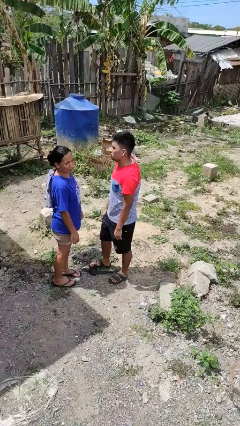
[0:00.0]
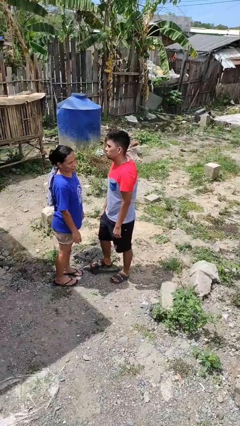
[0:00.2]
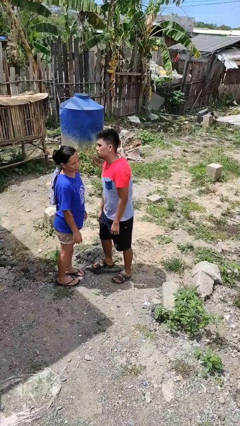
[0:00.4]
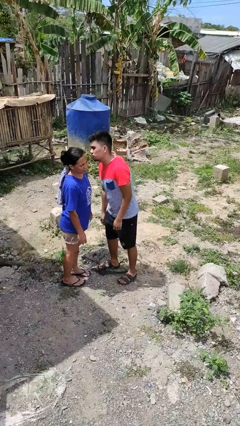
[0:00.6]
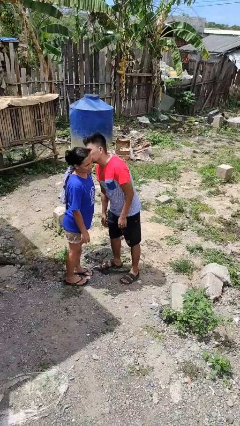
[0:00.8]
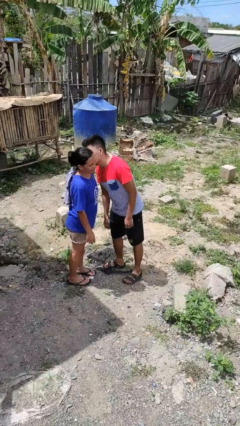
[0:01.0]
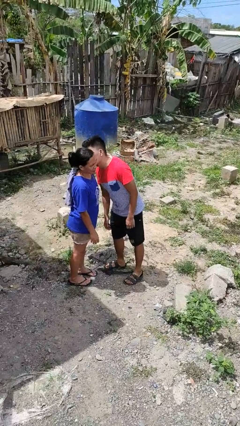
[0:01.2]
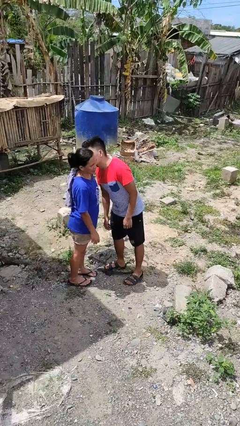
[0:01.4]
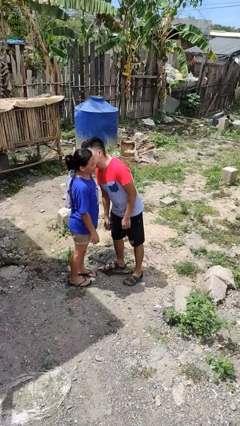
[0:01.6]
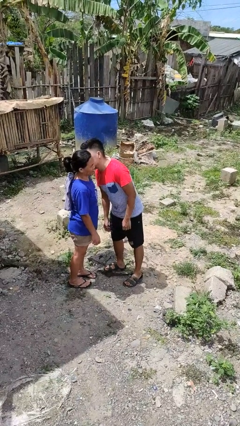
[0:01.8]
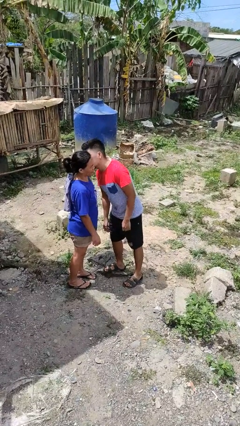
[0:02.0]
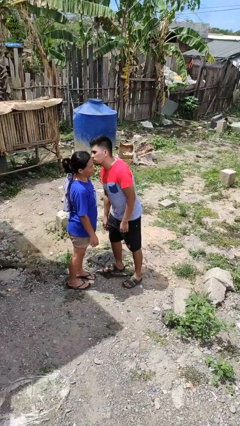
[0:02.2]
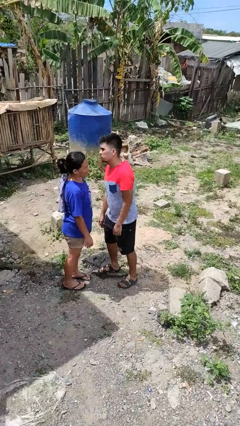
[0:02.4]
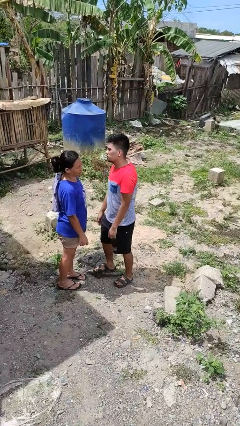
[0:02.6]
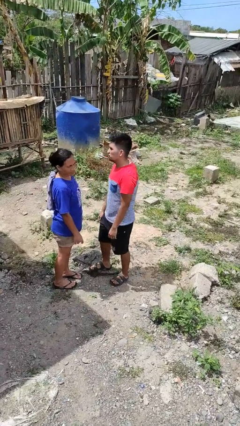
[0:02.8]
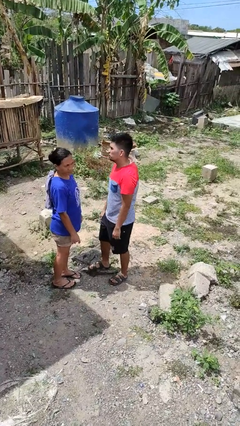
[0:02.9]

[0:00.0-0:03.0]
person kisses cheek of person

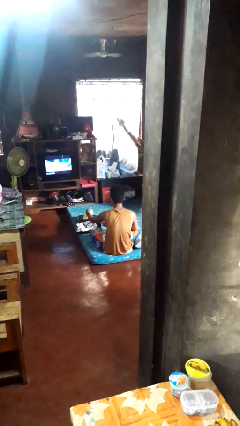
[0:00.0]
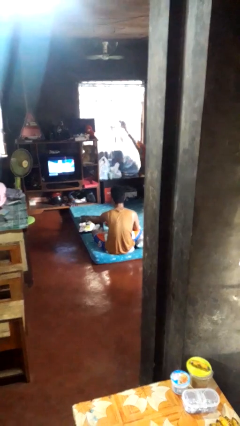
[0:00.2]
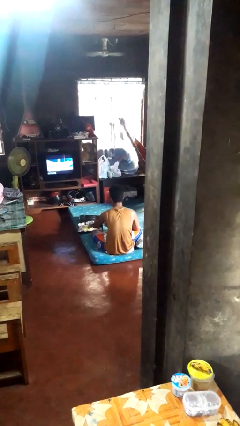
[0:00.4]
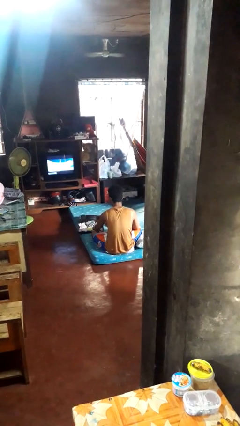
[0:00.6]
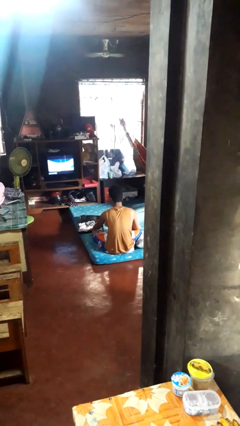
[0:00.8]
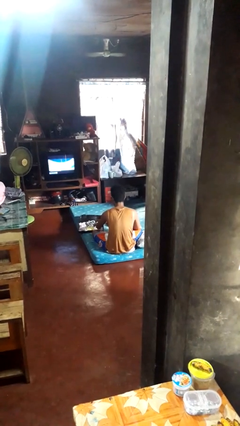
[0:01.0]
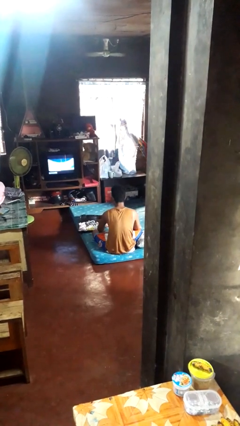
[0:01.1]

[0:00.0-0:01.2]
person loads clothes into suitcase

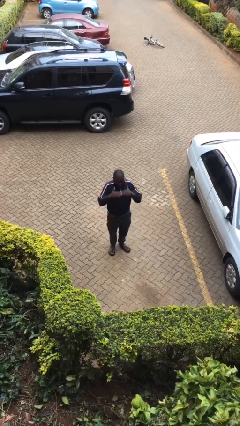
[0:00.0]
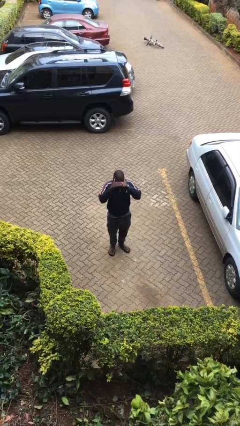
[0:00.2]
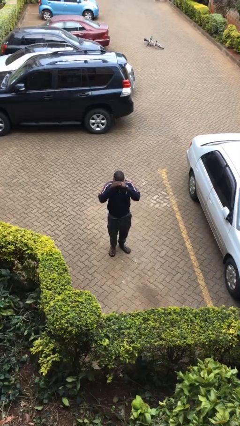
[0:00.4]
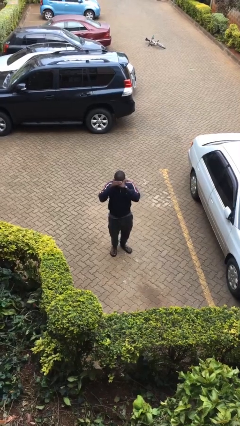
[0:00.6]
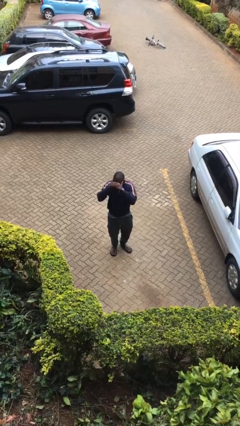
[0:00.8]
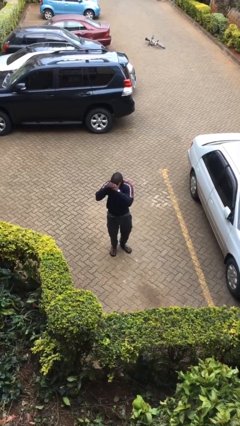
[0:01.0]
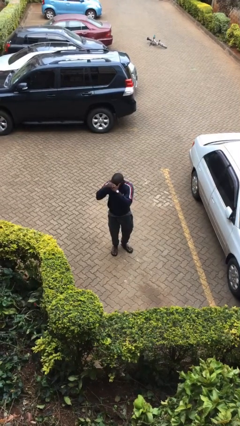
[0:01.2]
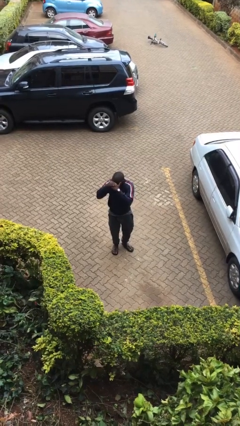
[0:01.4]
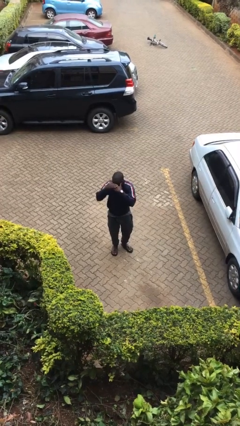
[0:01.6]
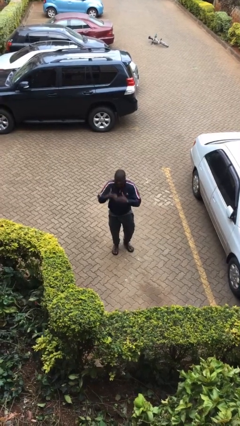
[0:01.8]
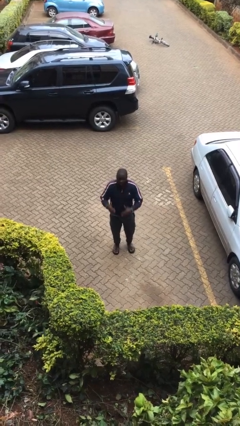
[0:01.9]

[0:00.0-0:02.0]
person shades eyes

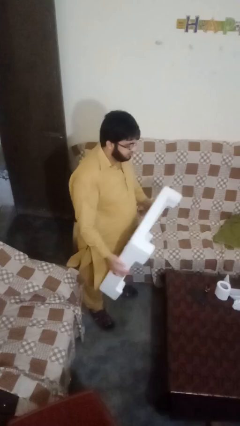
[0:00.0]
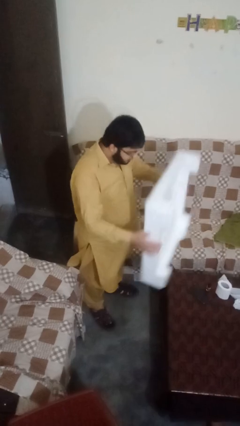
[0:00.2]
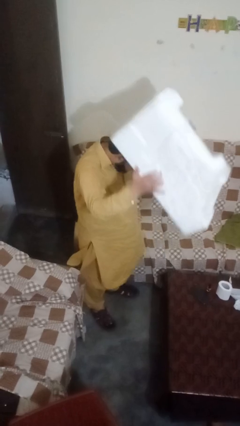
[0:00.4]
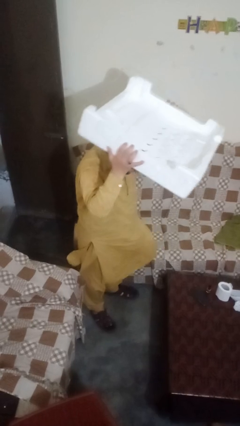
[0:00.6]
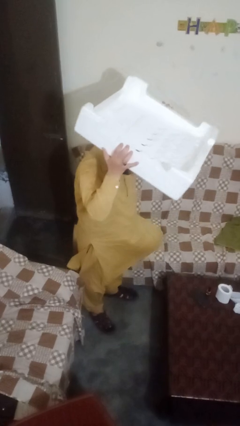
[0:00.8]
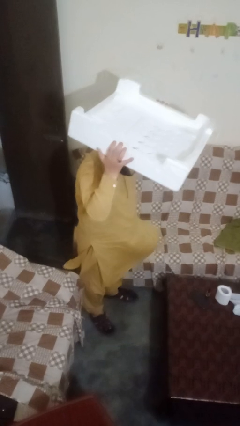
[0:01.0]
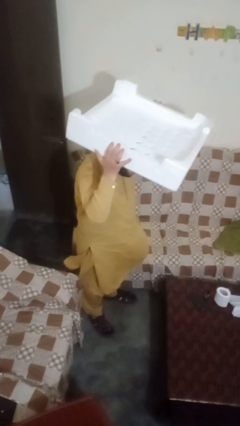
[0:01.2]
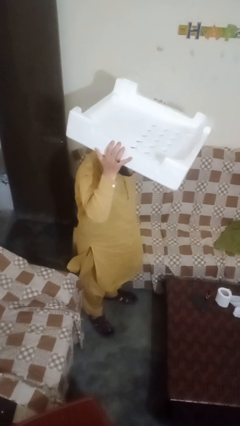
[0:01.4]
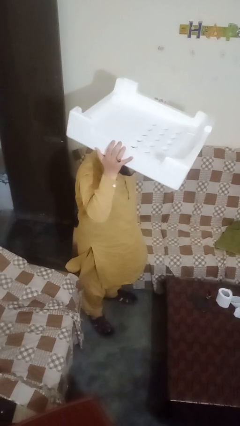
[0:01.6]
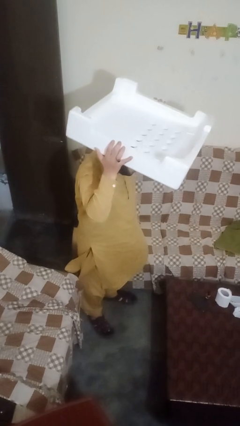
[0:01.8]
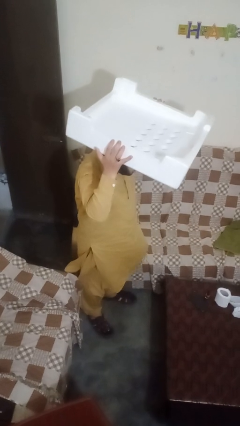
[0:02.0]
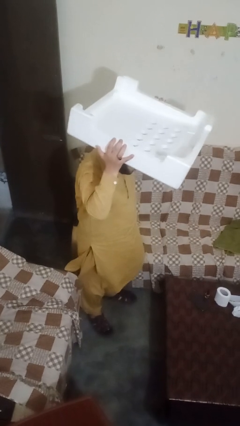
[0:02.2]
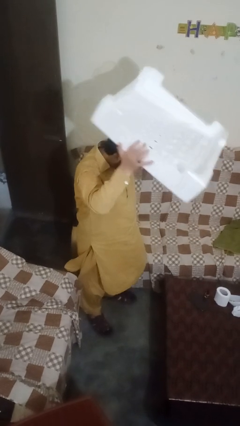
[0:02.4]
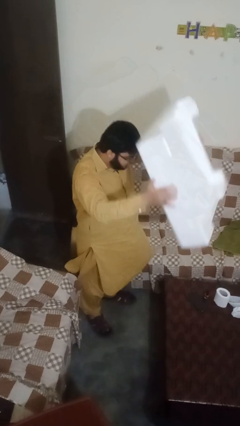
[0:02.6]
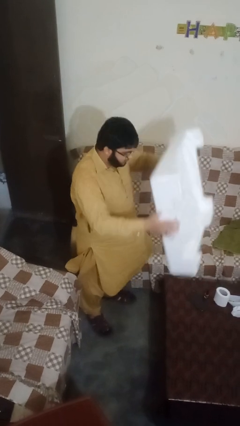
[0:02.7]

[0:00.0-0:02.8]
person holds object above head

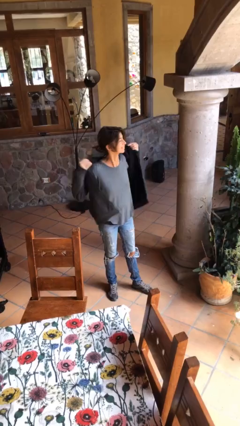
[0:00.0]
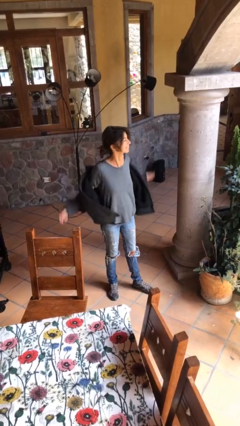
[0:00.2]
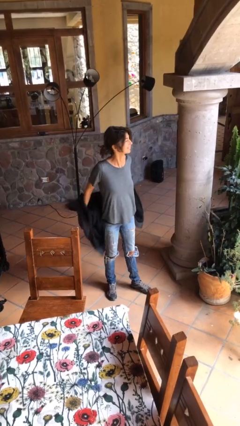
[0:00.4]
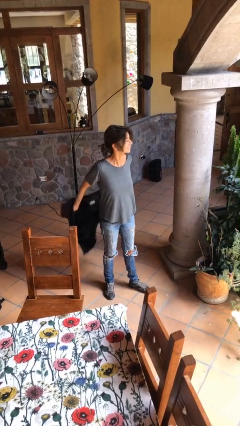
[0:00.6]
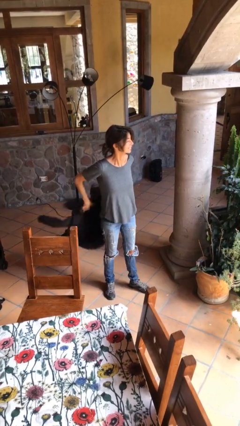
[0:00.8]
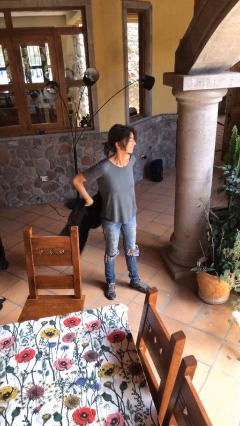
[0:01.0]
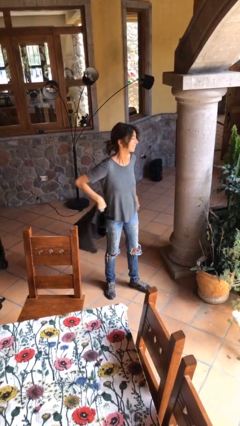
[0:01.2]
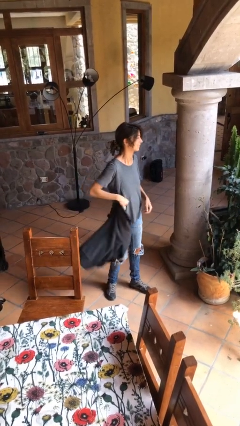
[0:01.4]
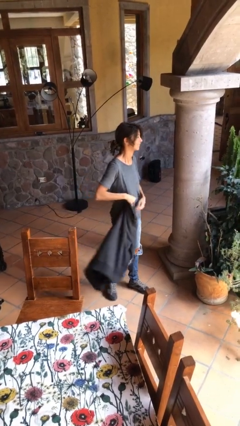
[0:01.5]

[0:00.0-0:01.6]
person takes off jacket

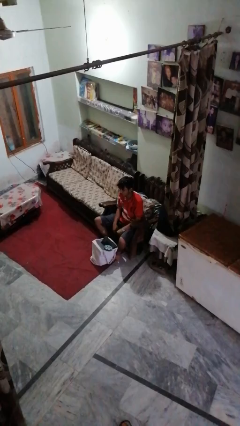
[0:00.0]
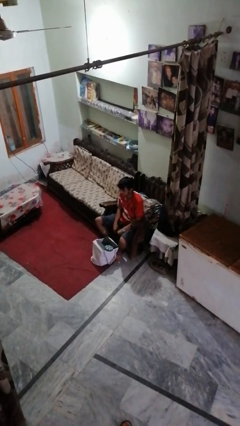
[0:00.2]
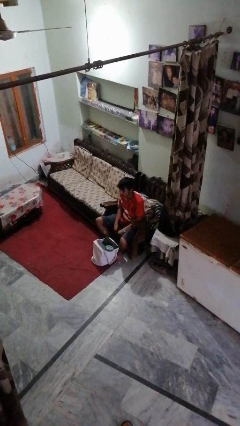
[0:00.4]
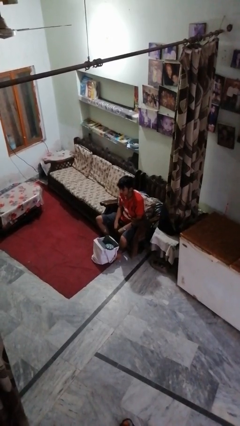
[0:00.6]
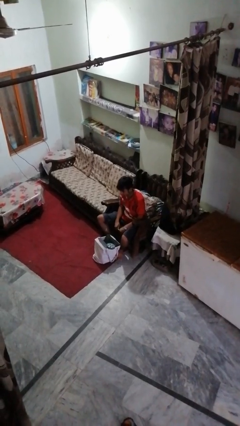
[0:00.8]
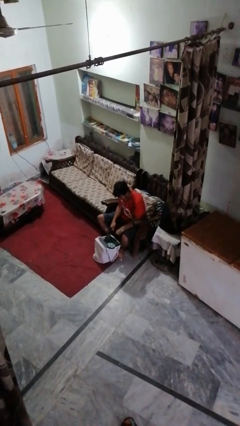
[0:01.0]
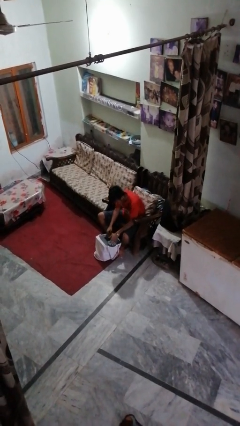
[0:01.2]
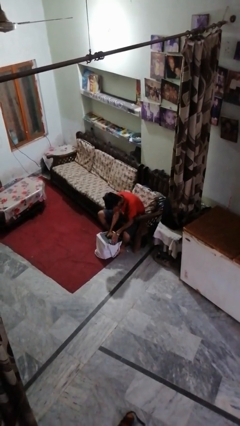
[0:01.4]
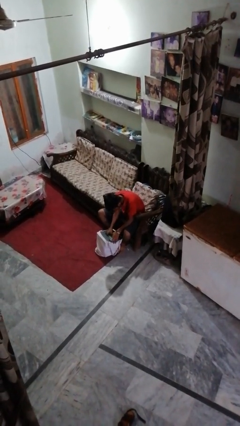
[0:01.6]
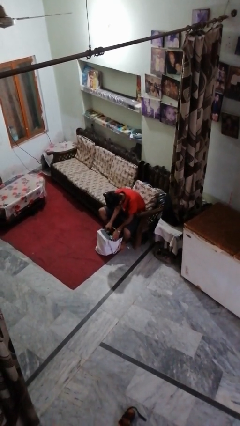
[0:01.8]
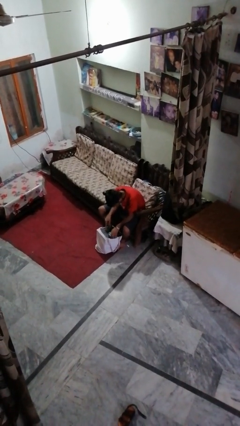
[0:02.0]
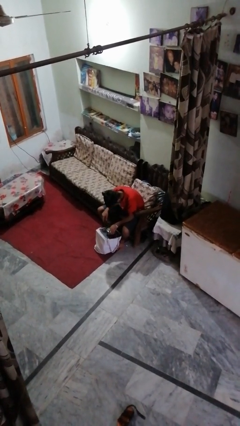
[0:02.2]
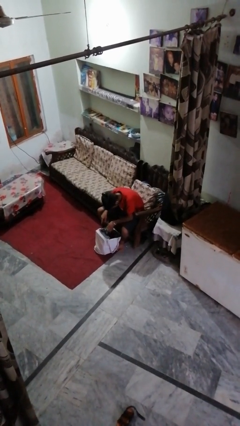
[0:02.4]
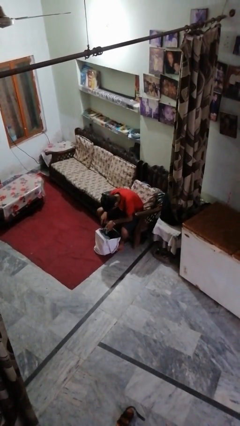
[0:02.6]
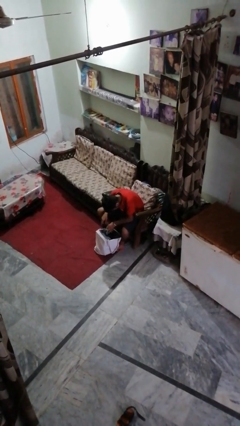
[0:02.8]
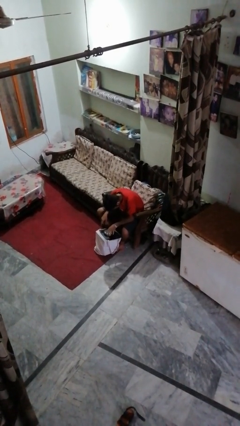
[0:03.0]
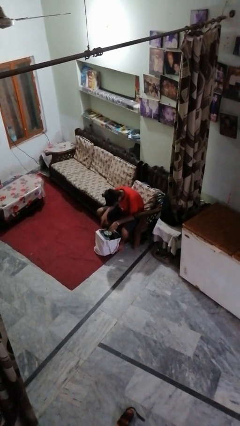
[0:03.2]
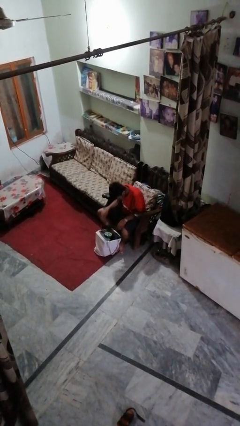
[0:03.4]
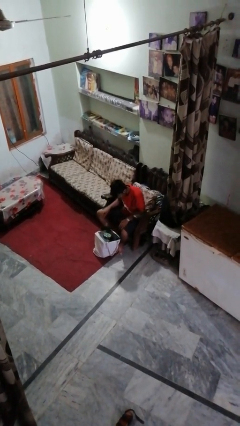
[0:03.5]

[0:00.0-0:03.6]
person searches under bed

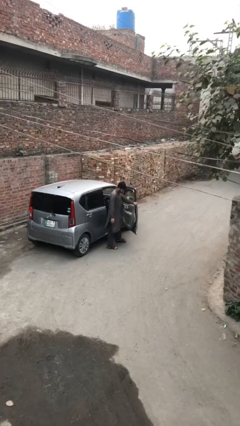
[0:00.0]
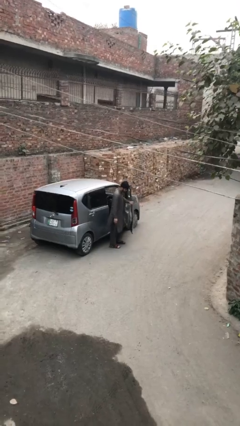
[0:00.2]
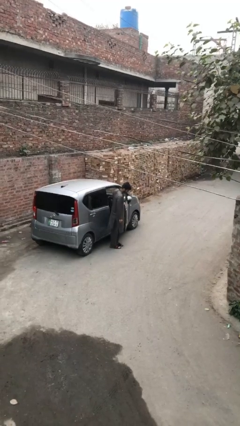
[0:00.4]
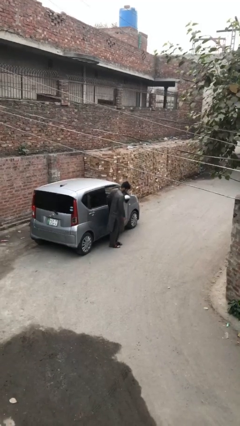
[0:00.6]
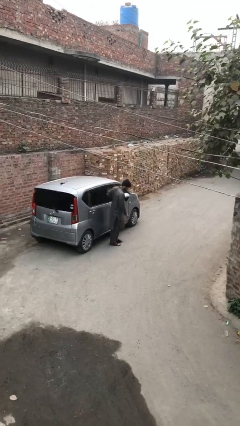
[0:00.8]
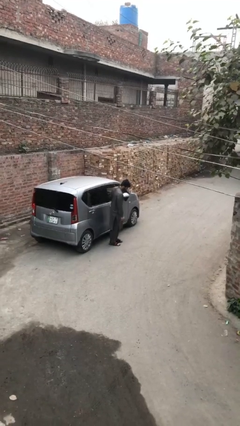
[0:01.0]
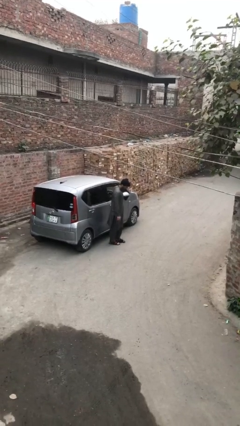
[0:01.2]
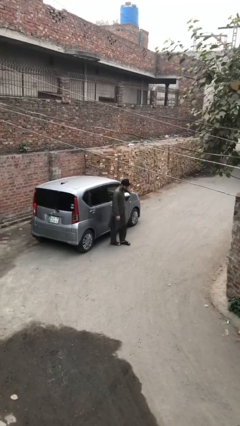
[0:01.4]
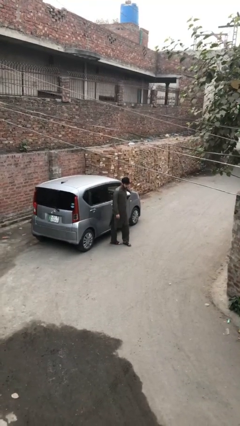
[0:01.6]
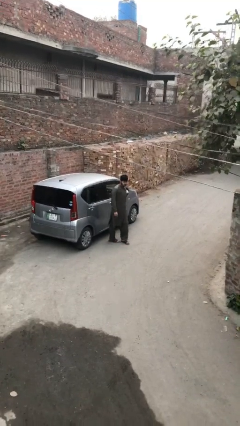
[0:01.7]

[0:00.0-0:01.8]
person closes car door

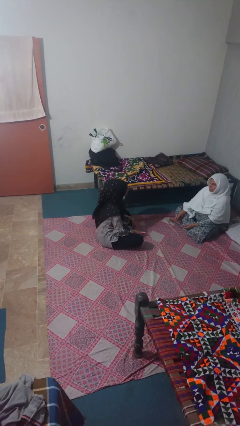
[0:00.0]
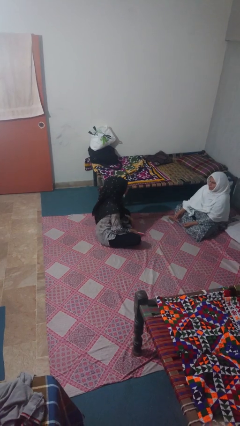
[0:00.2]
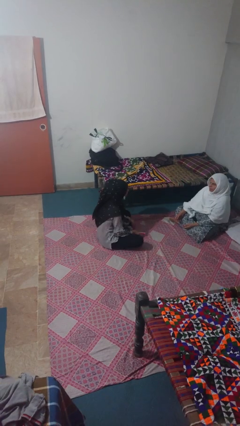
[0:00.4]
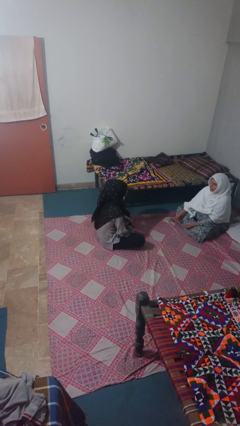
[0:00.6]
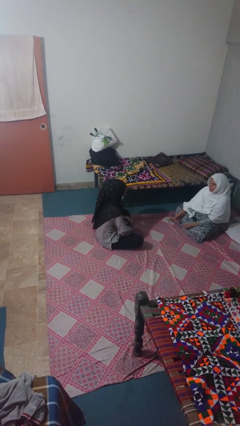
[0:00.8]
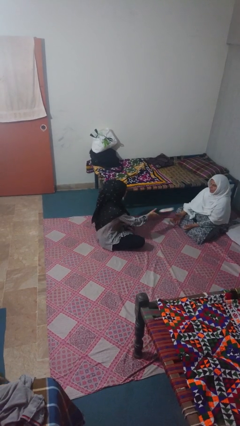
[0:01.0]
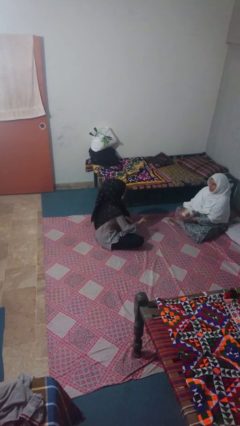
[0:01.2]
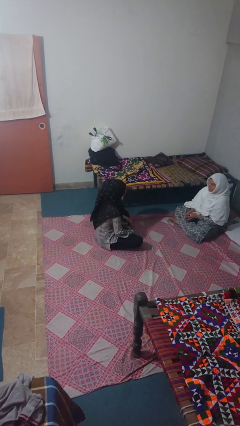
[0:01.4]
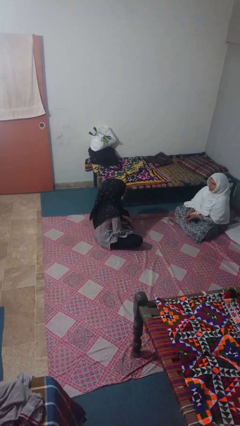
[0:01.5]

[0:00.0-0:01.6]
person throws object to person
